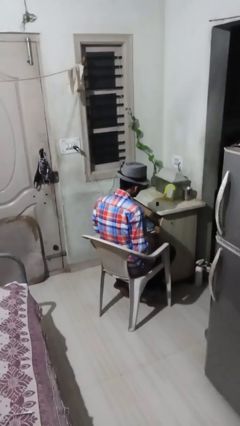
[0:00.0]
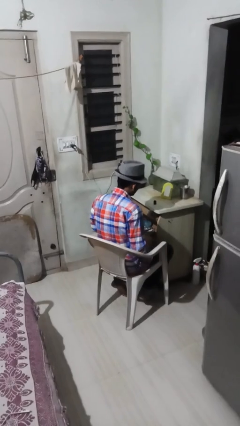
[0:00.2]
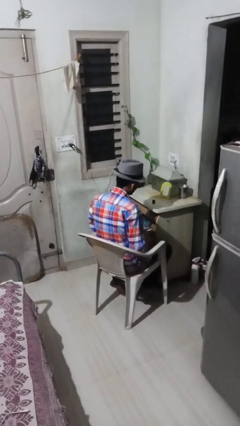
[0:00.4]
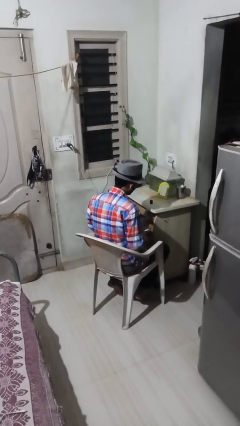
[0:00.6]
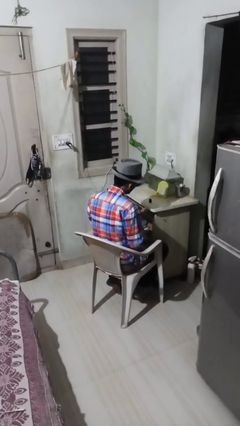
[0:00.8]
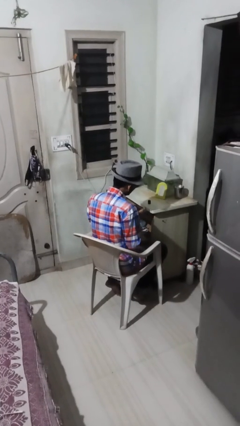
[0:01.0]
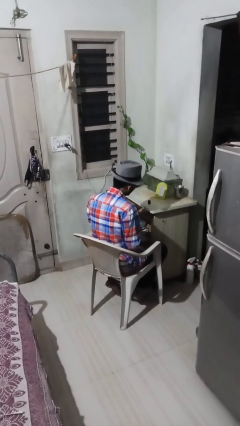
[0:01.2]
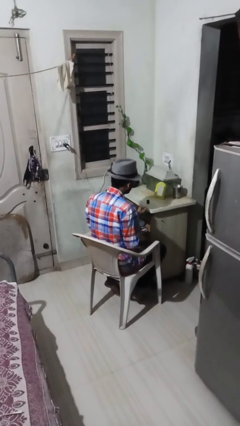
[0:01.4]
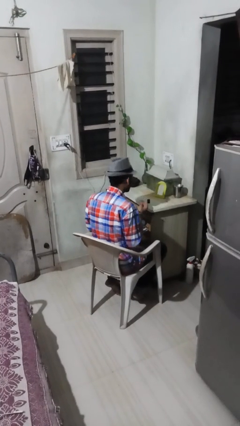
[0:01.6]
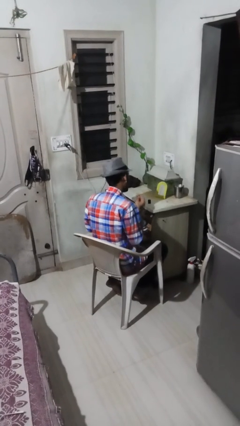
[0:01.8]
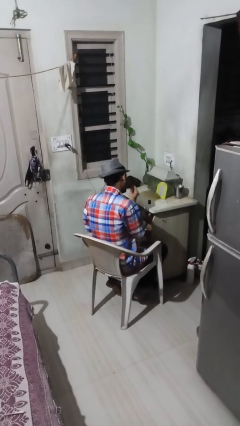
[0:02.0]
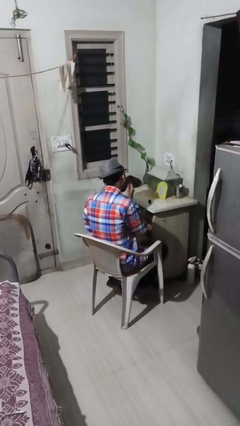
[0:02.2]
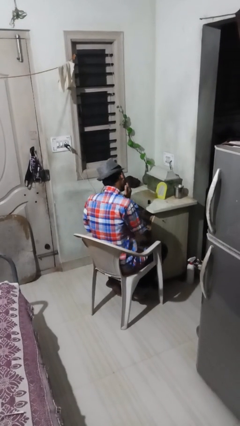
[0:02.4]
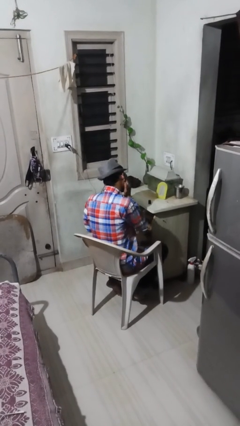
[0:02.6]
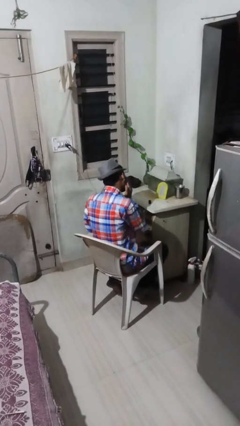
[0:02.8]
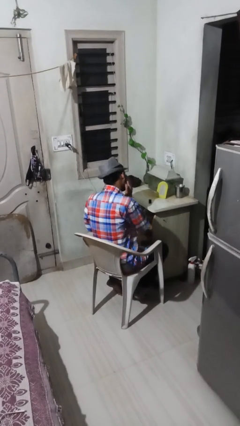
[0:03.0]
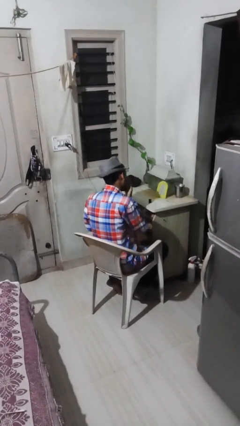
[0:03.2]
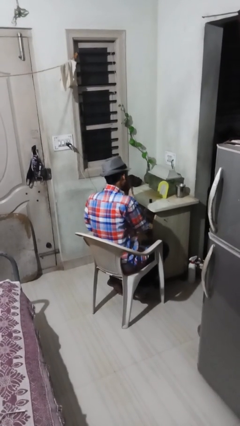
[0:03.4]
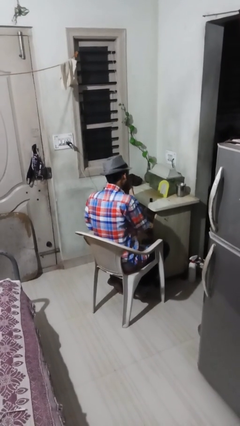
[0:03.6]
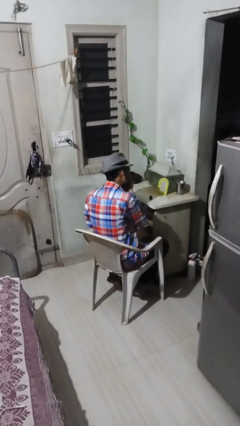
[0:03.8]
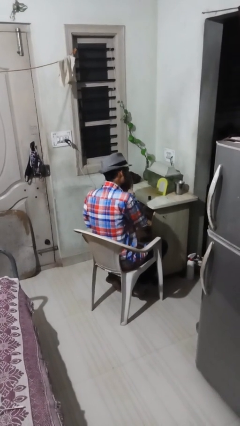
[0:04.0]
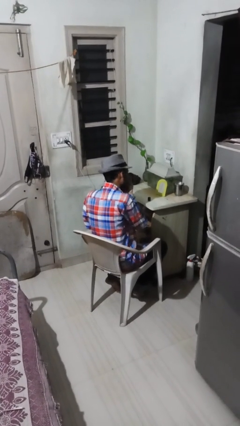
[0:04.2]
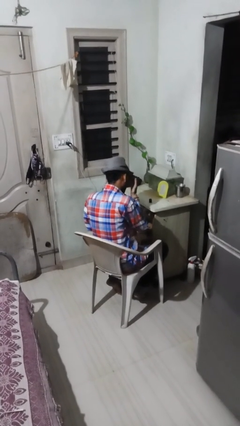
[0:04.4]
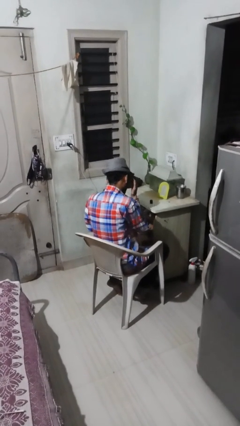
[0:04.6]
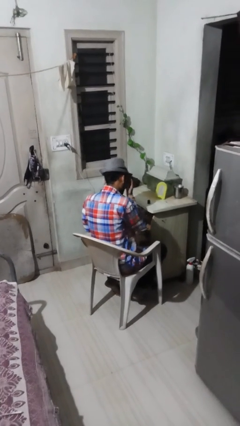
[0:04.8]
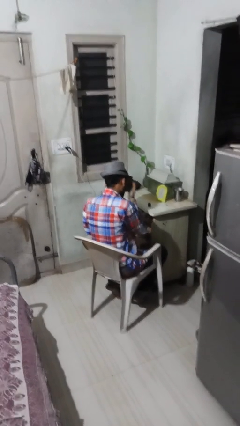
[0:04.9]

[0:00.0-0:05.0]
person applies foundation makeup

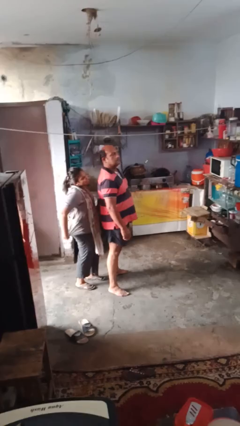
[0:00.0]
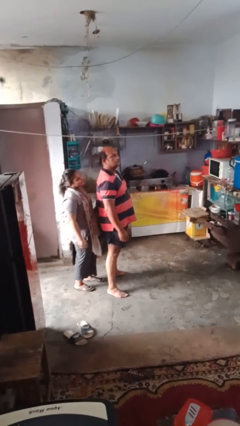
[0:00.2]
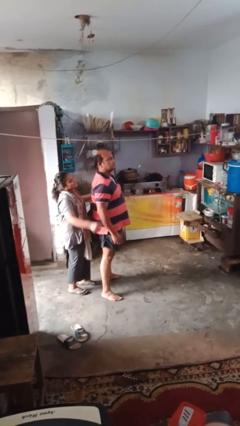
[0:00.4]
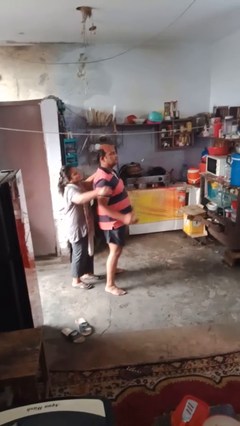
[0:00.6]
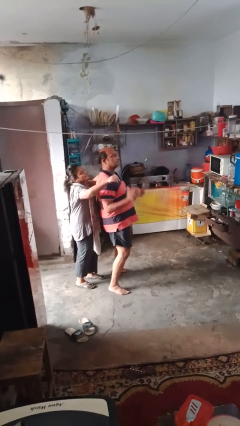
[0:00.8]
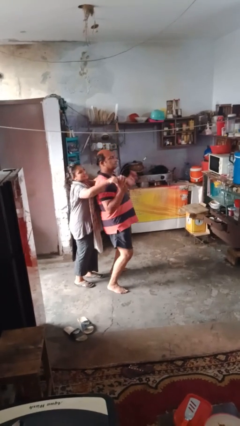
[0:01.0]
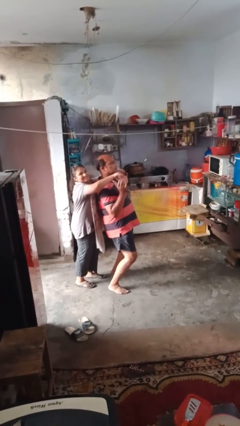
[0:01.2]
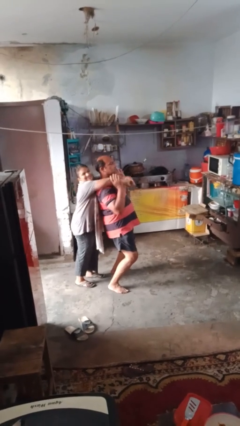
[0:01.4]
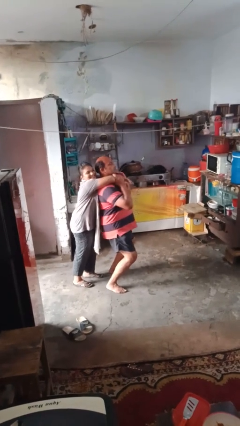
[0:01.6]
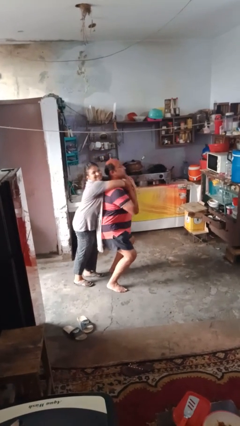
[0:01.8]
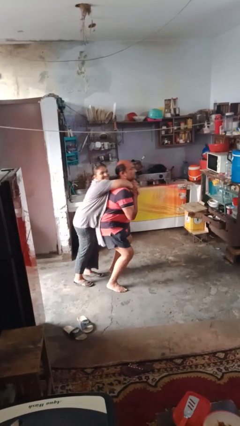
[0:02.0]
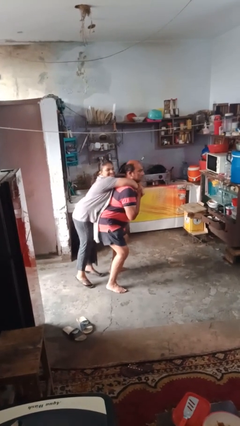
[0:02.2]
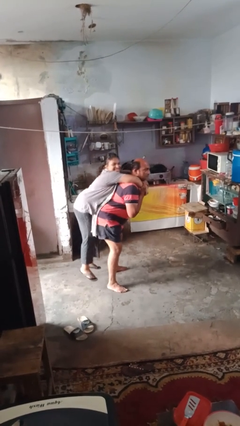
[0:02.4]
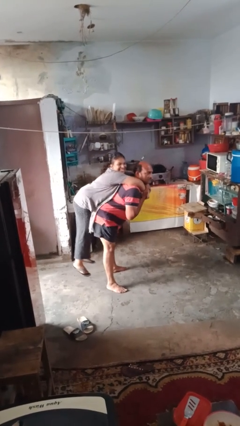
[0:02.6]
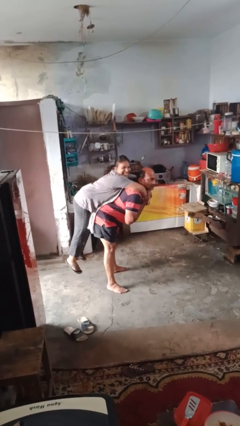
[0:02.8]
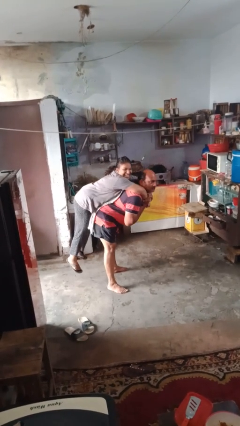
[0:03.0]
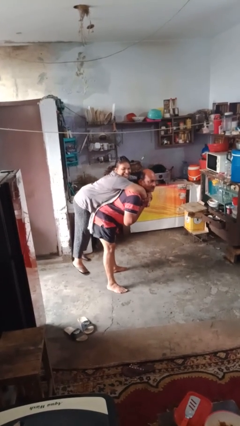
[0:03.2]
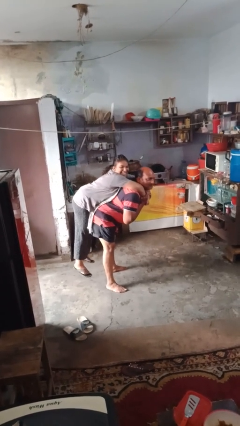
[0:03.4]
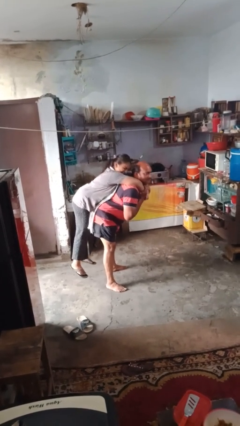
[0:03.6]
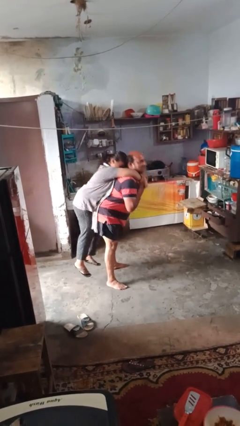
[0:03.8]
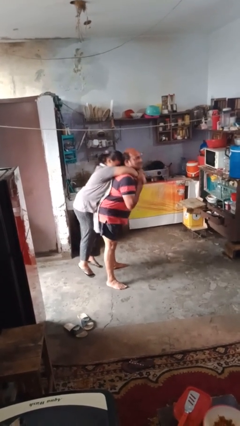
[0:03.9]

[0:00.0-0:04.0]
person carries person on shoulders

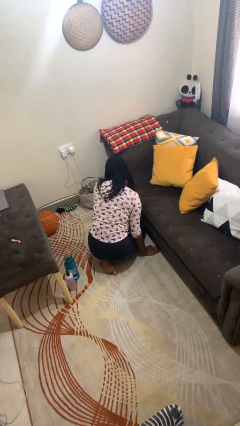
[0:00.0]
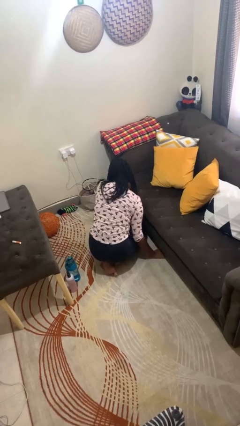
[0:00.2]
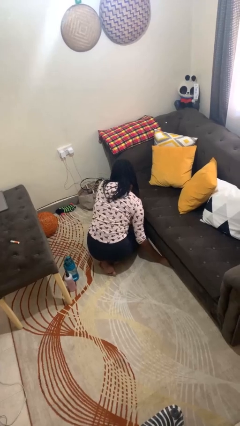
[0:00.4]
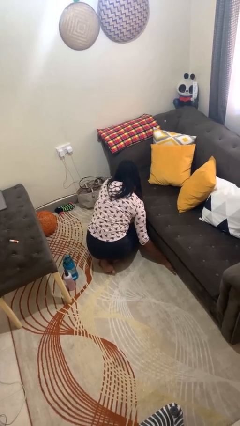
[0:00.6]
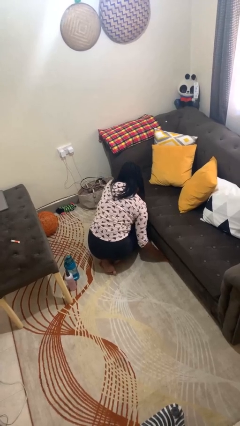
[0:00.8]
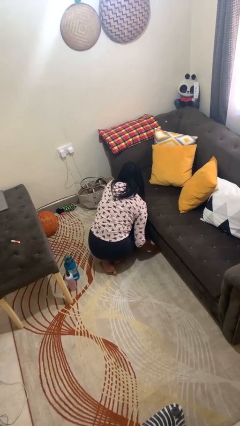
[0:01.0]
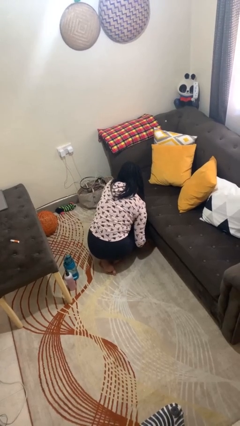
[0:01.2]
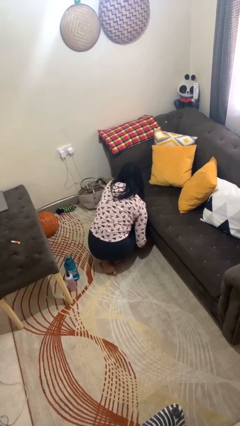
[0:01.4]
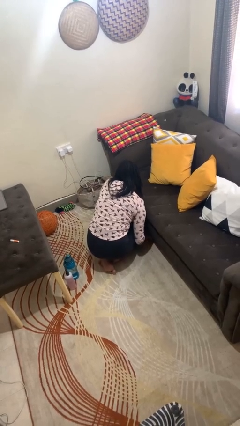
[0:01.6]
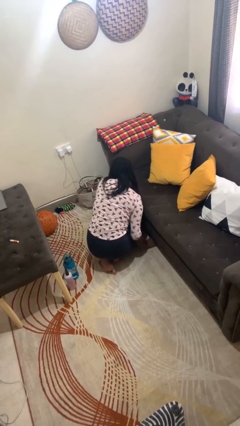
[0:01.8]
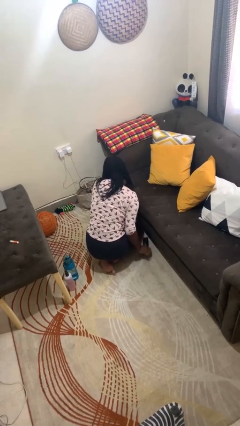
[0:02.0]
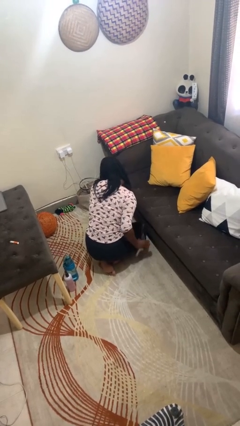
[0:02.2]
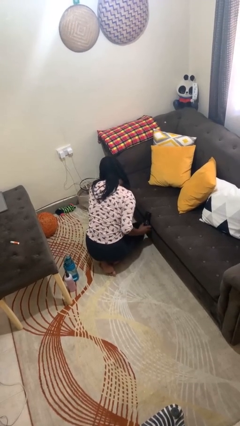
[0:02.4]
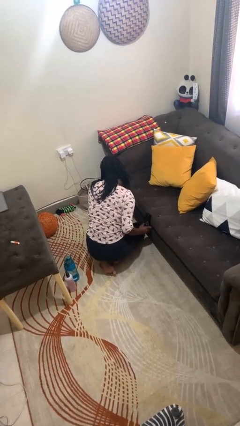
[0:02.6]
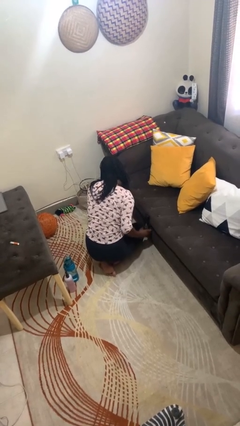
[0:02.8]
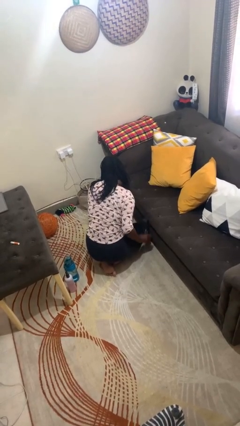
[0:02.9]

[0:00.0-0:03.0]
person searches under couch

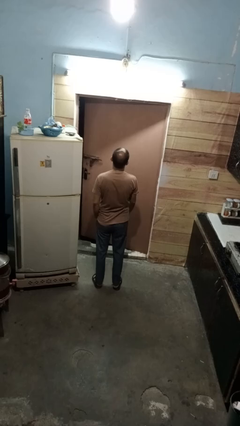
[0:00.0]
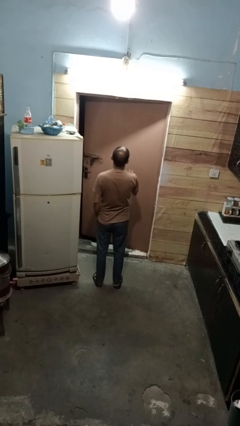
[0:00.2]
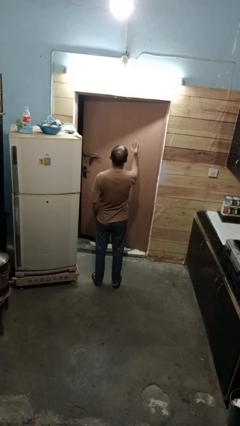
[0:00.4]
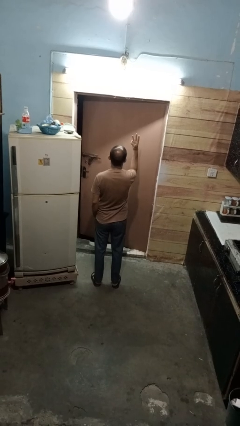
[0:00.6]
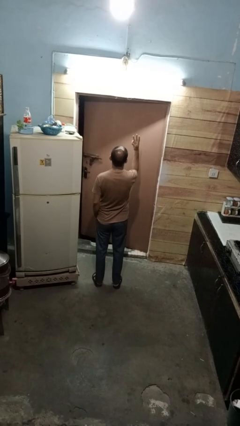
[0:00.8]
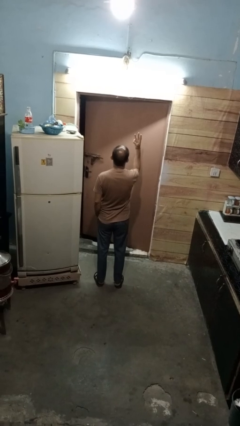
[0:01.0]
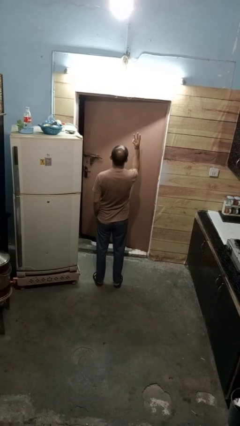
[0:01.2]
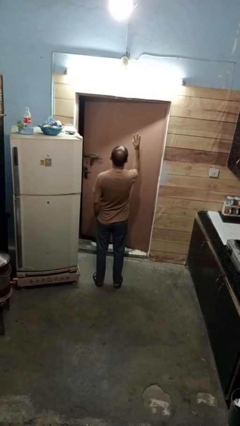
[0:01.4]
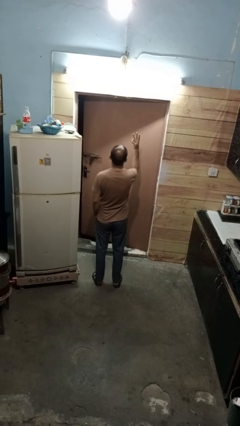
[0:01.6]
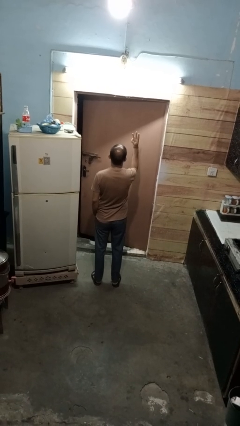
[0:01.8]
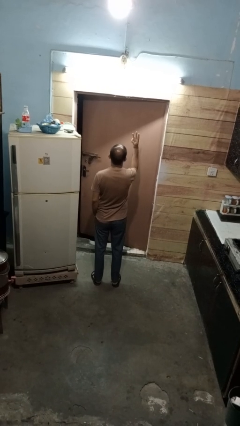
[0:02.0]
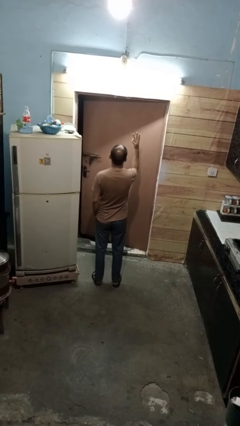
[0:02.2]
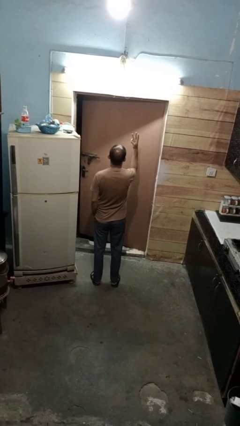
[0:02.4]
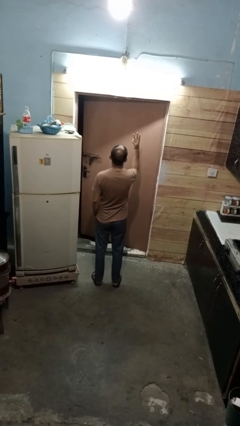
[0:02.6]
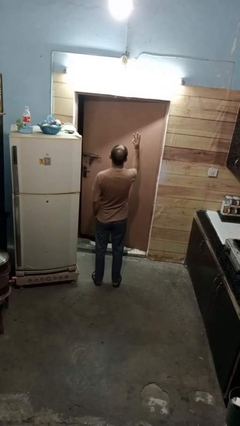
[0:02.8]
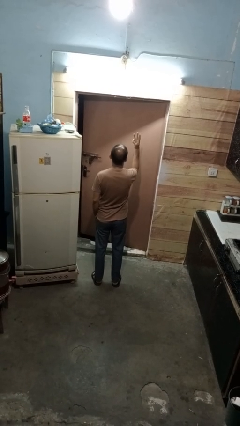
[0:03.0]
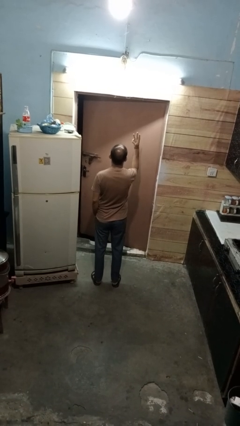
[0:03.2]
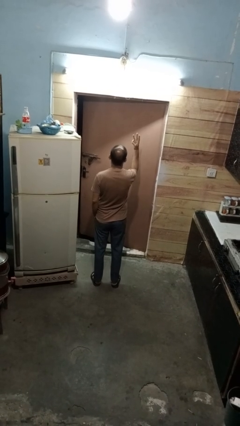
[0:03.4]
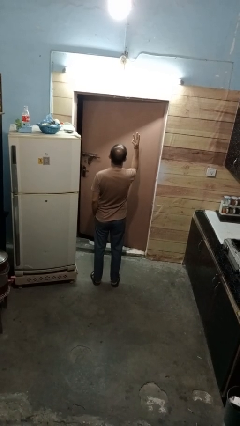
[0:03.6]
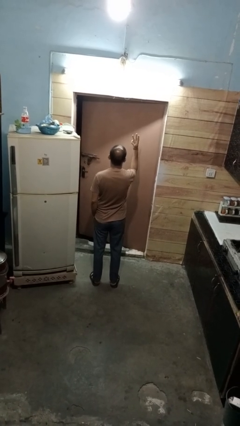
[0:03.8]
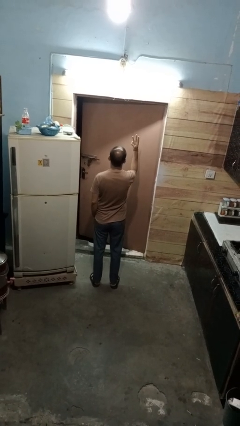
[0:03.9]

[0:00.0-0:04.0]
person gestures number three

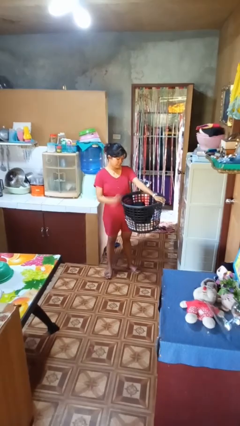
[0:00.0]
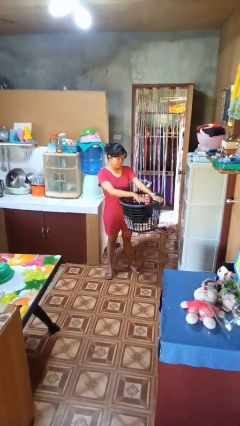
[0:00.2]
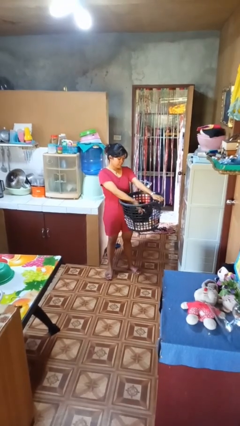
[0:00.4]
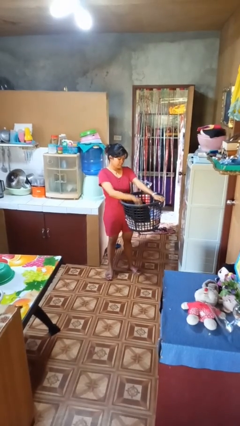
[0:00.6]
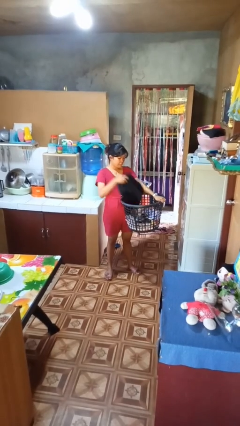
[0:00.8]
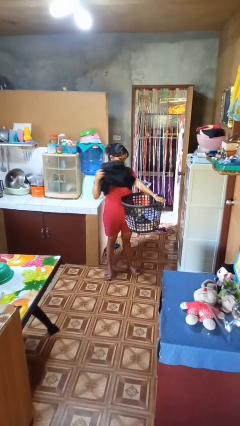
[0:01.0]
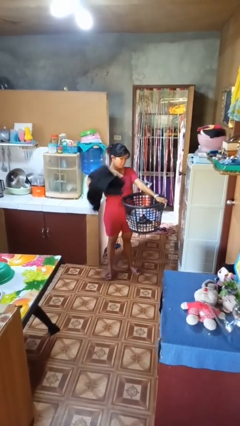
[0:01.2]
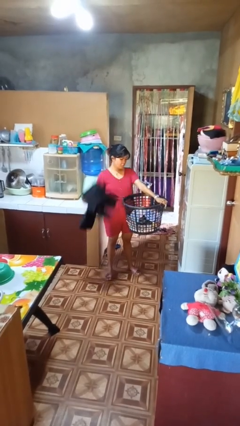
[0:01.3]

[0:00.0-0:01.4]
person takes object from basket

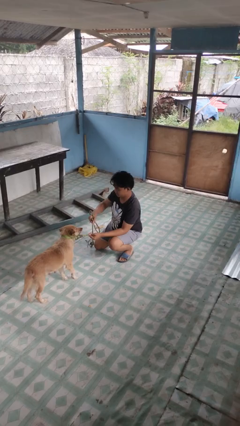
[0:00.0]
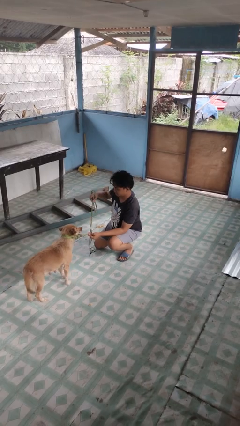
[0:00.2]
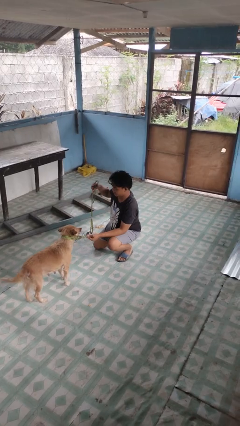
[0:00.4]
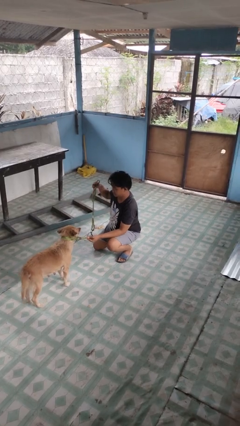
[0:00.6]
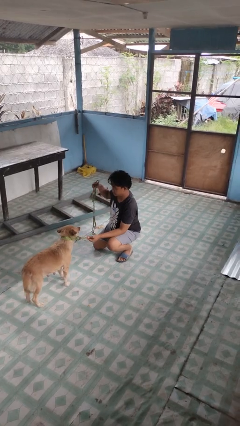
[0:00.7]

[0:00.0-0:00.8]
person unattaches leash from dog
